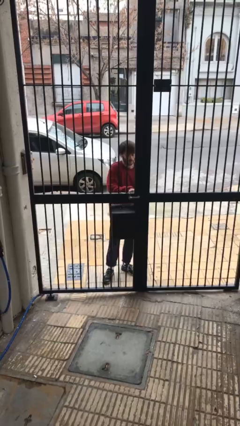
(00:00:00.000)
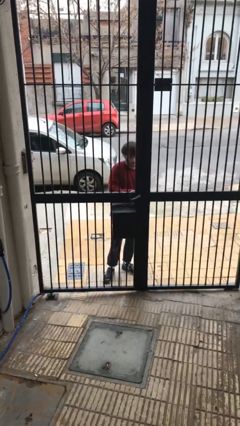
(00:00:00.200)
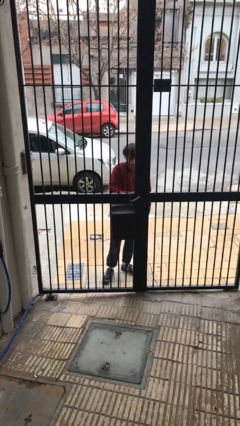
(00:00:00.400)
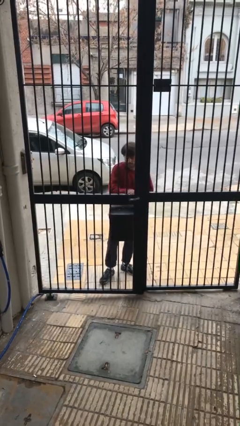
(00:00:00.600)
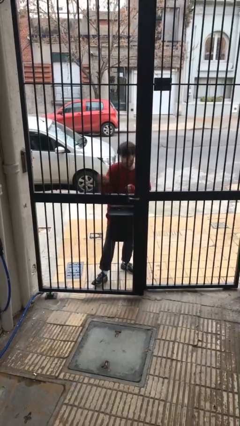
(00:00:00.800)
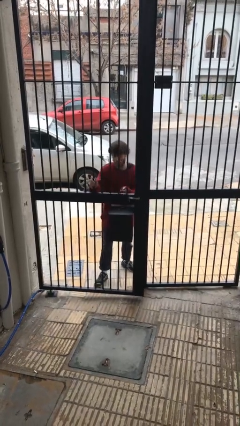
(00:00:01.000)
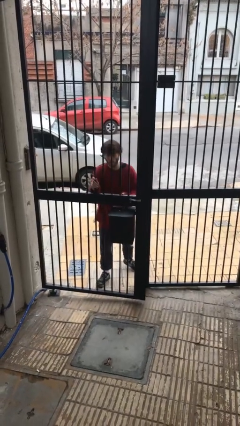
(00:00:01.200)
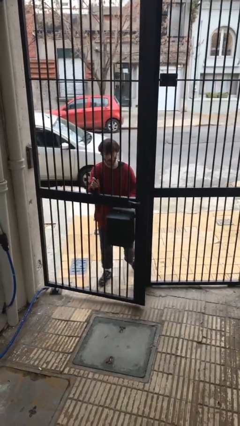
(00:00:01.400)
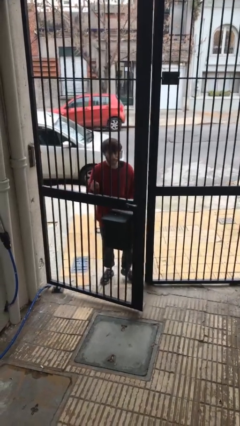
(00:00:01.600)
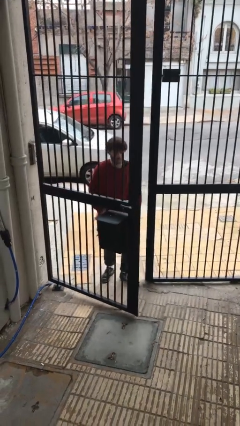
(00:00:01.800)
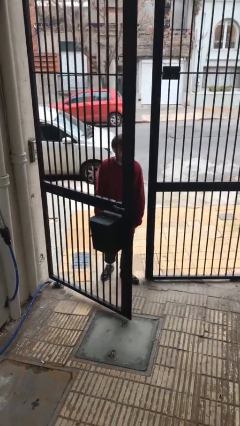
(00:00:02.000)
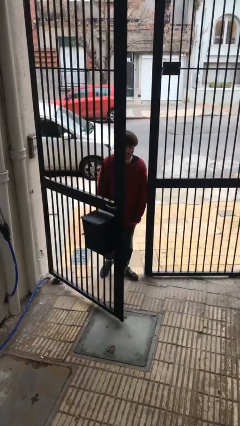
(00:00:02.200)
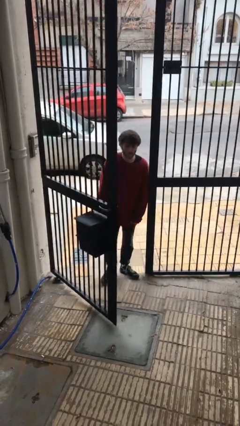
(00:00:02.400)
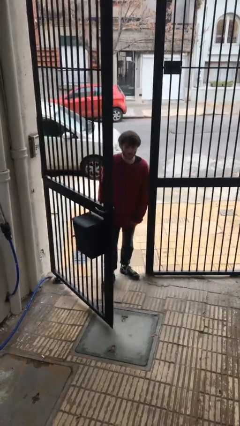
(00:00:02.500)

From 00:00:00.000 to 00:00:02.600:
person opens gate

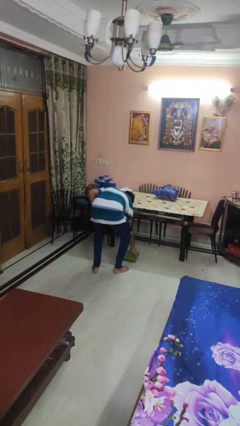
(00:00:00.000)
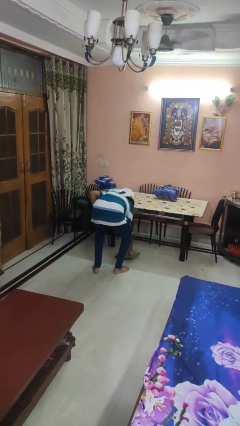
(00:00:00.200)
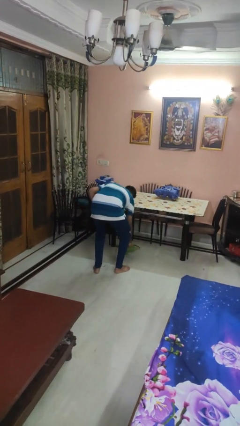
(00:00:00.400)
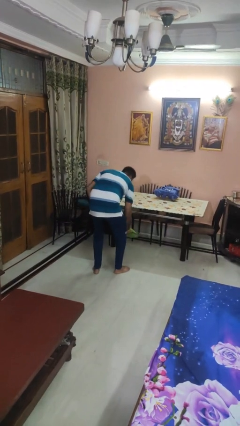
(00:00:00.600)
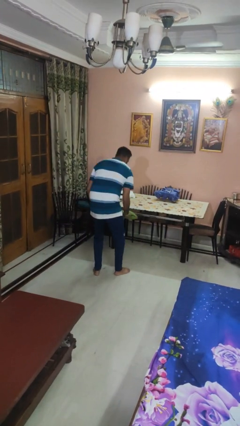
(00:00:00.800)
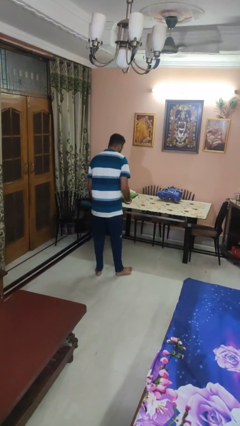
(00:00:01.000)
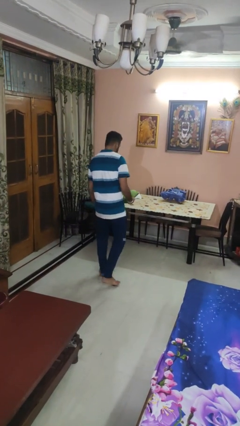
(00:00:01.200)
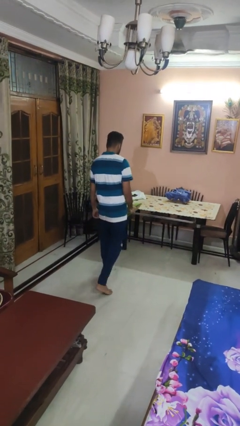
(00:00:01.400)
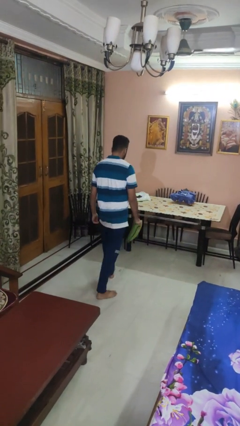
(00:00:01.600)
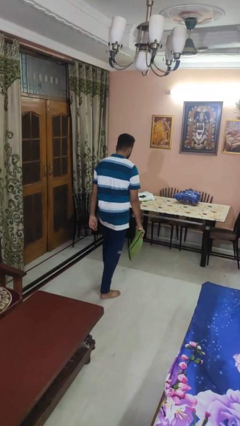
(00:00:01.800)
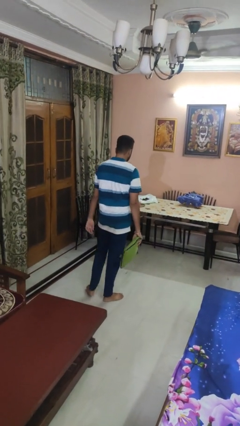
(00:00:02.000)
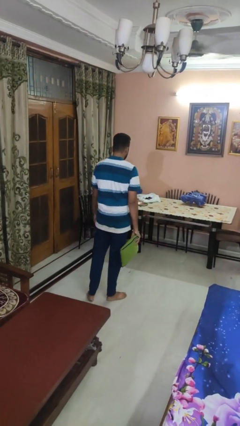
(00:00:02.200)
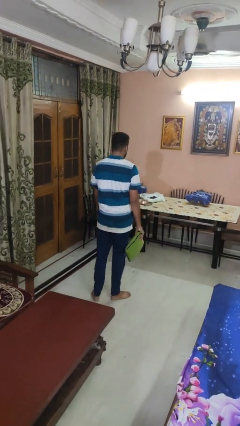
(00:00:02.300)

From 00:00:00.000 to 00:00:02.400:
person picks up object from floor

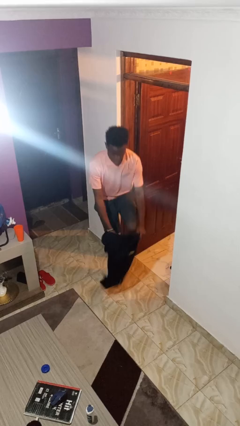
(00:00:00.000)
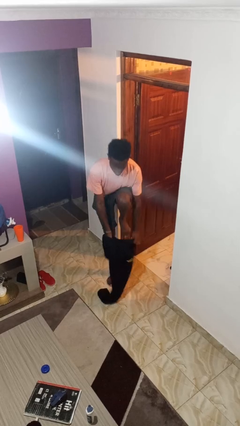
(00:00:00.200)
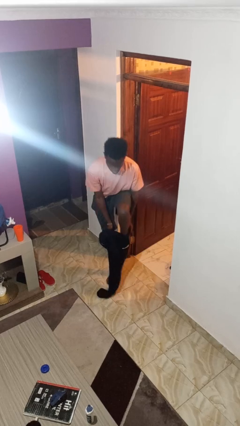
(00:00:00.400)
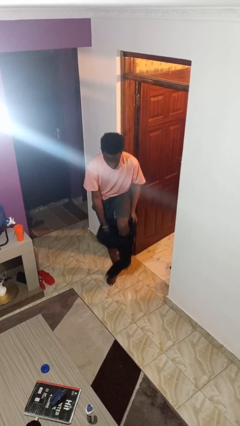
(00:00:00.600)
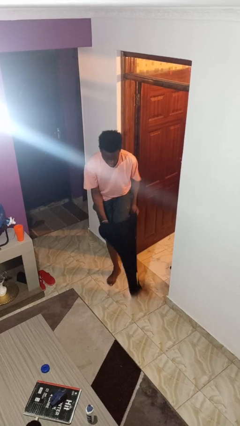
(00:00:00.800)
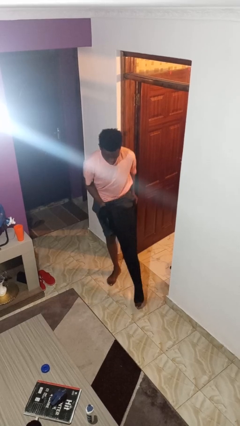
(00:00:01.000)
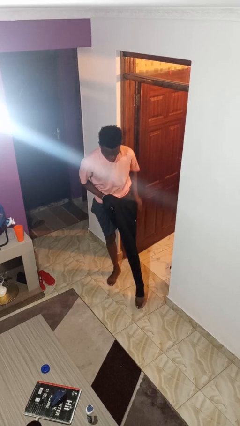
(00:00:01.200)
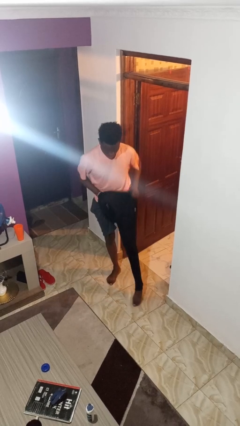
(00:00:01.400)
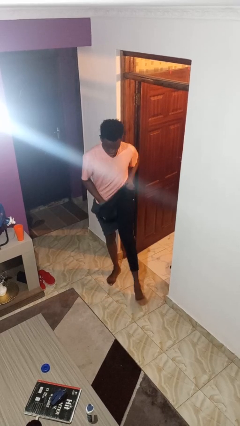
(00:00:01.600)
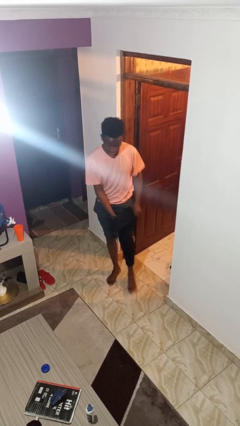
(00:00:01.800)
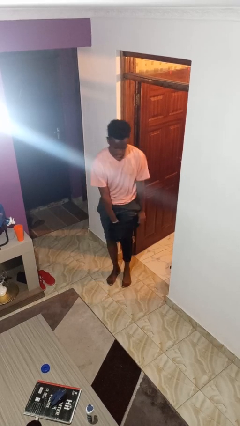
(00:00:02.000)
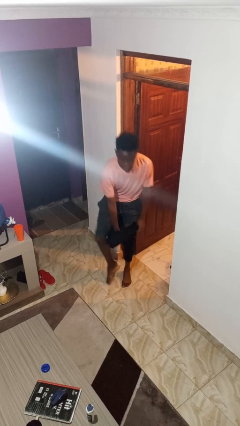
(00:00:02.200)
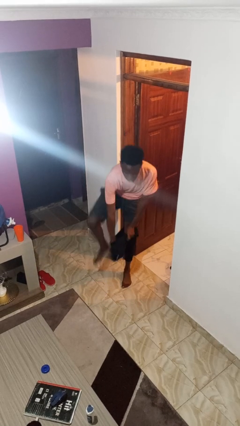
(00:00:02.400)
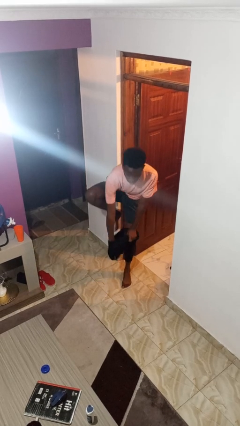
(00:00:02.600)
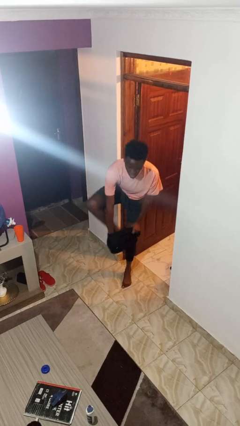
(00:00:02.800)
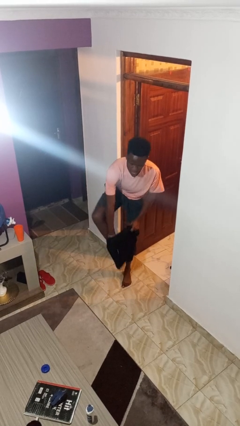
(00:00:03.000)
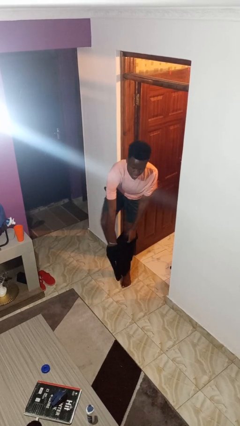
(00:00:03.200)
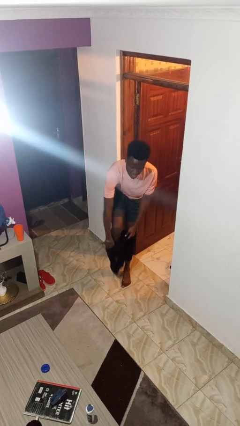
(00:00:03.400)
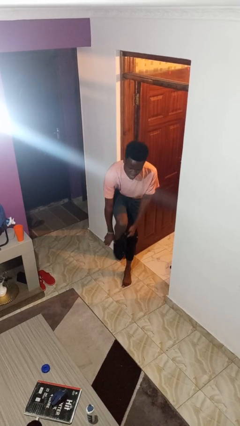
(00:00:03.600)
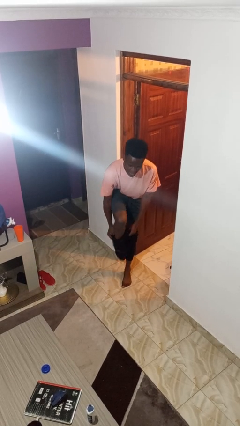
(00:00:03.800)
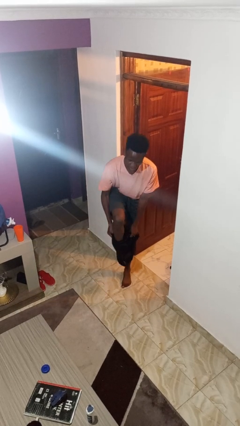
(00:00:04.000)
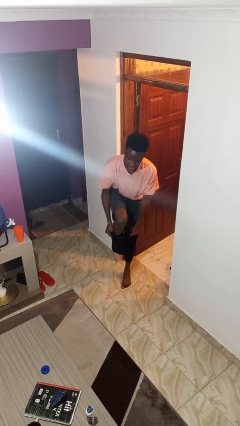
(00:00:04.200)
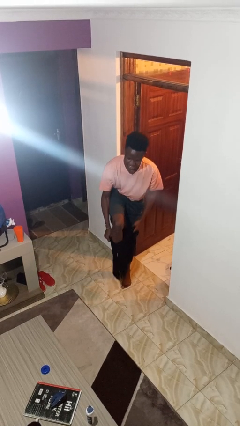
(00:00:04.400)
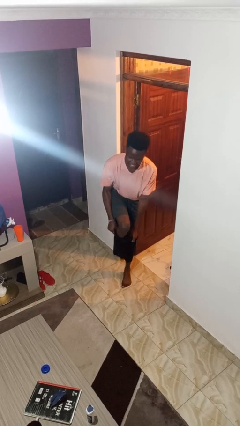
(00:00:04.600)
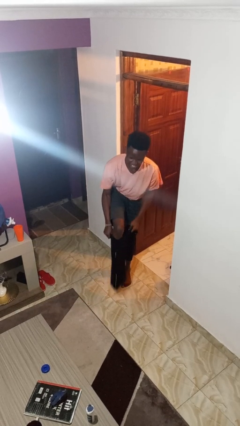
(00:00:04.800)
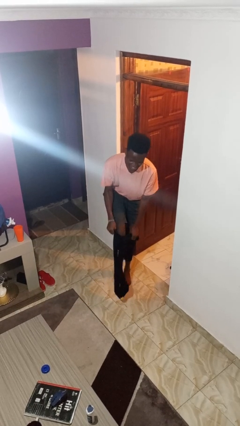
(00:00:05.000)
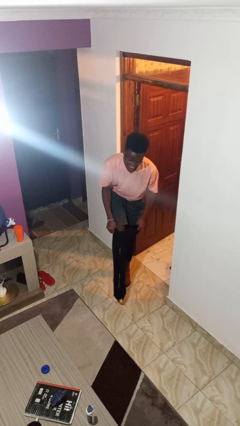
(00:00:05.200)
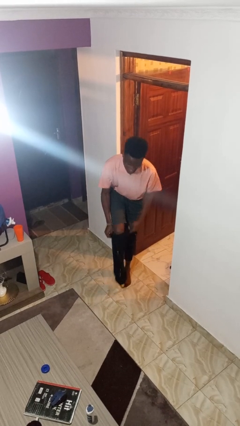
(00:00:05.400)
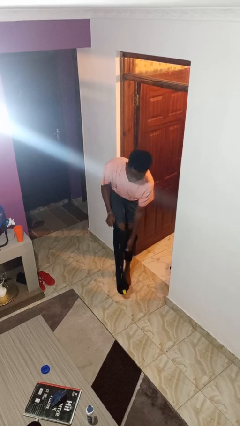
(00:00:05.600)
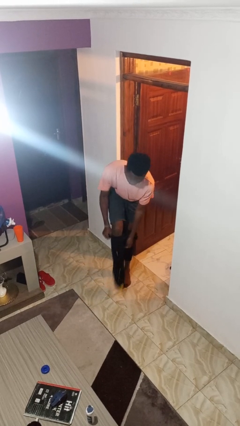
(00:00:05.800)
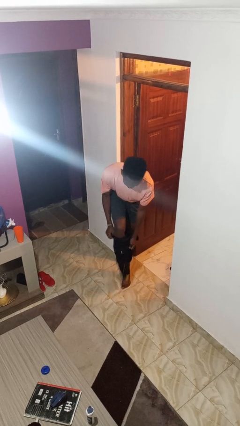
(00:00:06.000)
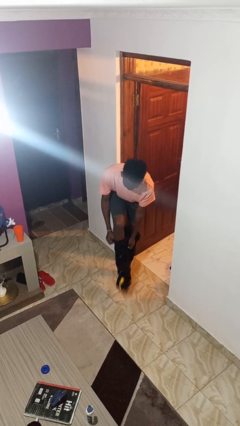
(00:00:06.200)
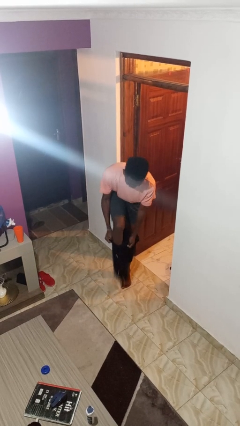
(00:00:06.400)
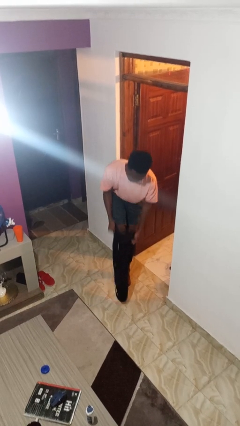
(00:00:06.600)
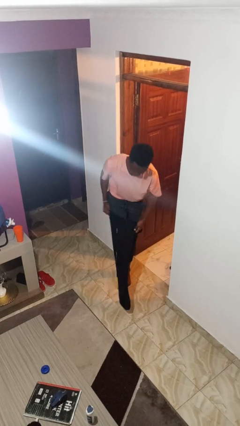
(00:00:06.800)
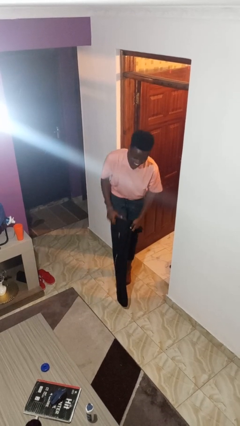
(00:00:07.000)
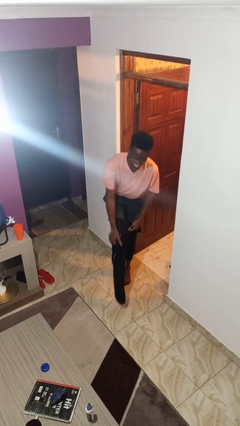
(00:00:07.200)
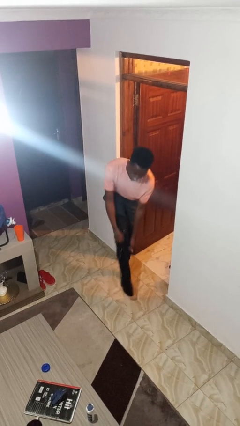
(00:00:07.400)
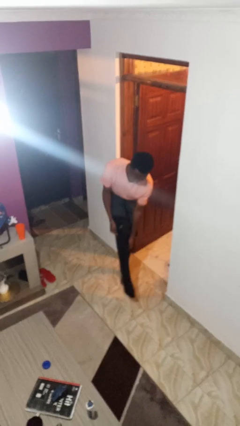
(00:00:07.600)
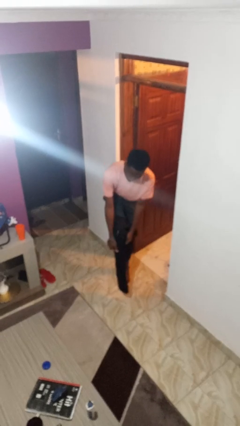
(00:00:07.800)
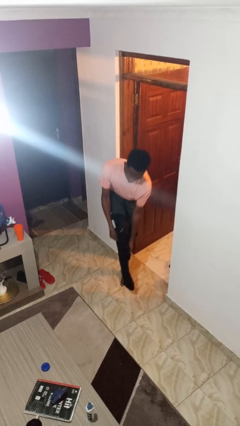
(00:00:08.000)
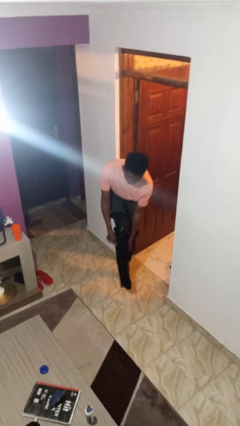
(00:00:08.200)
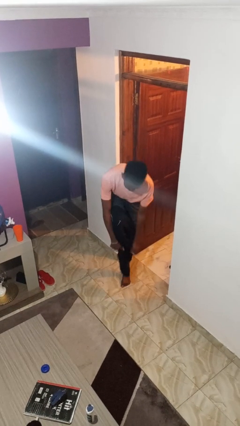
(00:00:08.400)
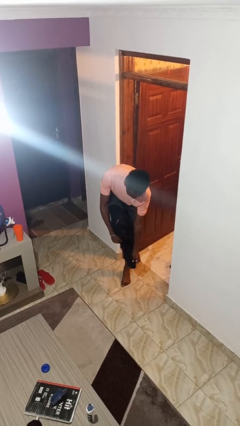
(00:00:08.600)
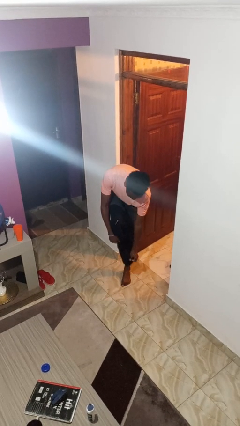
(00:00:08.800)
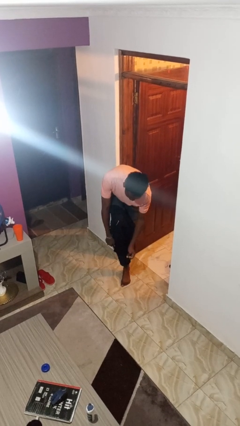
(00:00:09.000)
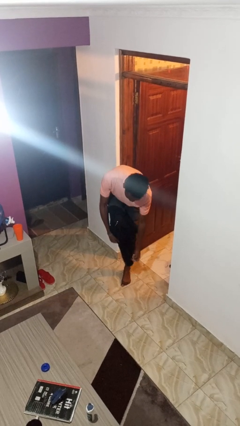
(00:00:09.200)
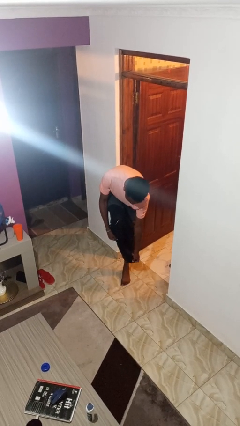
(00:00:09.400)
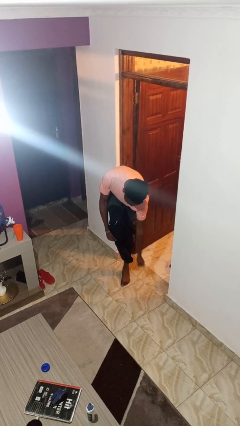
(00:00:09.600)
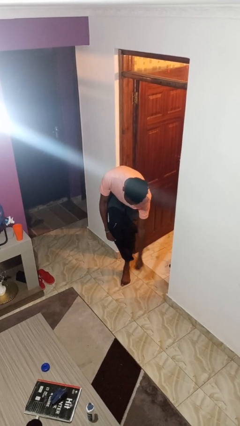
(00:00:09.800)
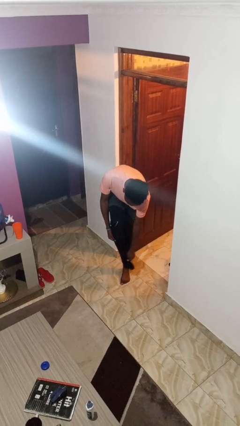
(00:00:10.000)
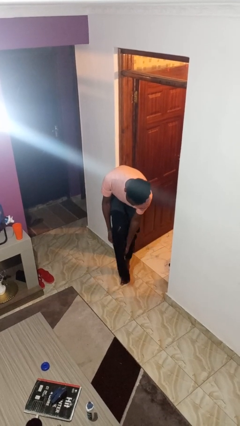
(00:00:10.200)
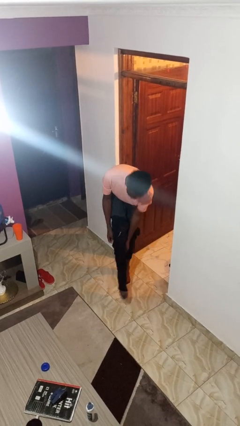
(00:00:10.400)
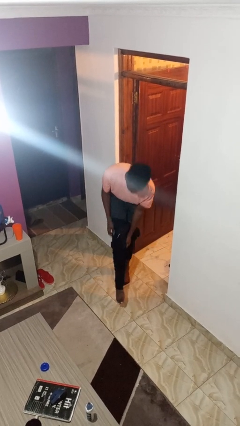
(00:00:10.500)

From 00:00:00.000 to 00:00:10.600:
person puts on pants

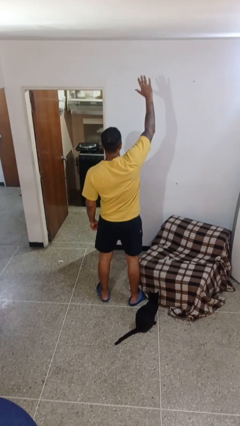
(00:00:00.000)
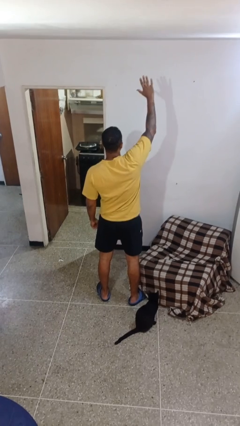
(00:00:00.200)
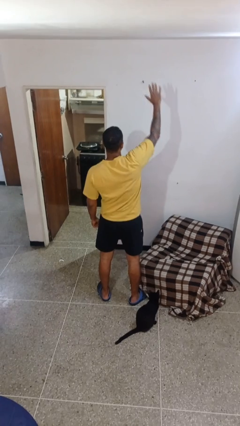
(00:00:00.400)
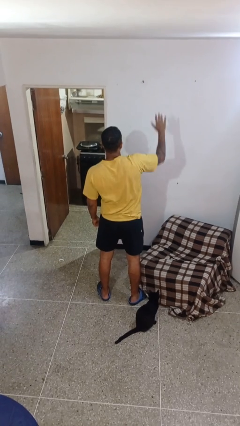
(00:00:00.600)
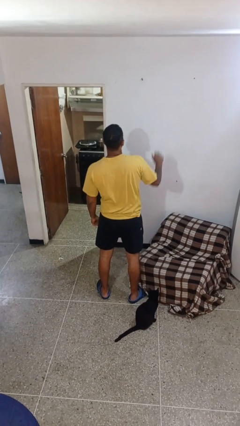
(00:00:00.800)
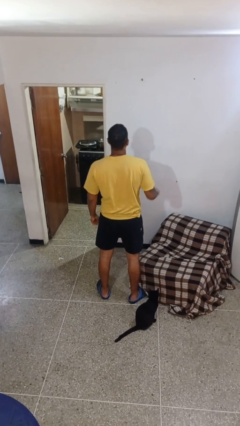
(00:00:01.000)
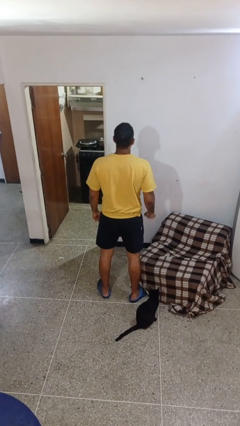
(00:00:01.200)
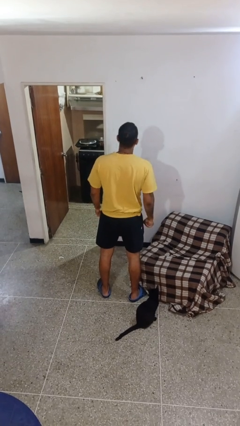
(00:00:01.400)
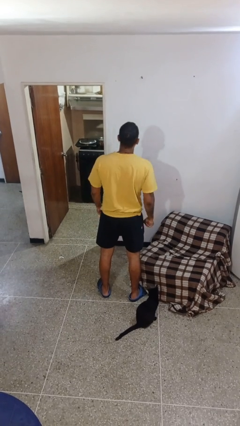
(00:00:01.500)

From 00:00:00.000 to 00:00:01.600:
person gestures lower hand

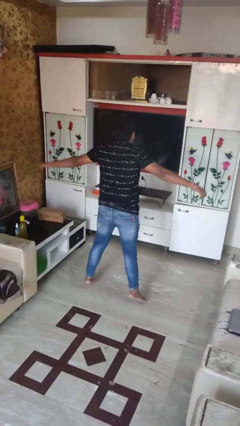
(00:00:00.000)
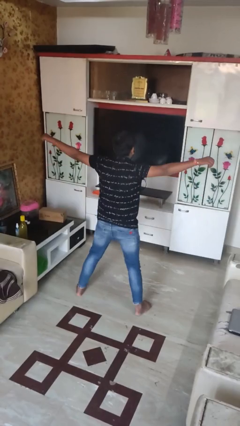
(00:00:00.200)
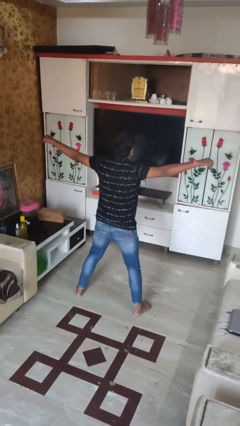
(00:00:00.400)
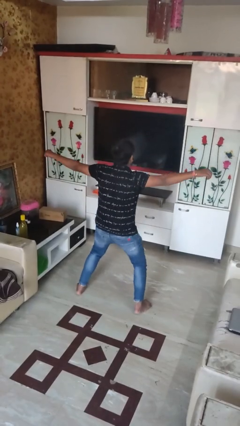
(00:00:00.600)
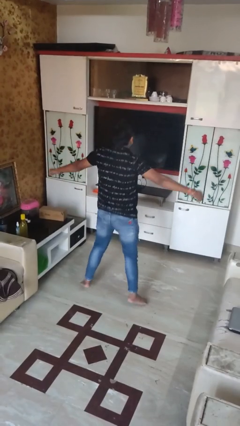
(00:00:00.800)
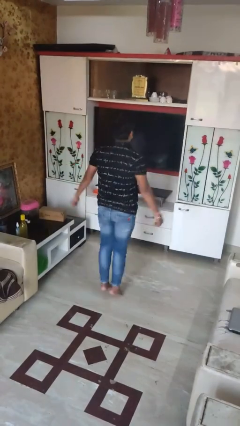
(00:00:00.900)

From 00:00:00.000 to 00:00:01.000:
person exercises with jumping jacks
